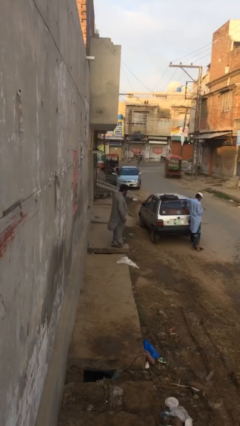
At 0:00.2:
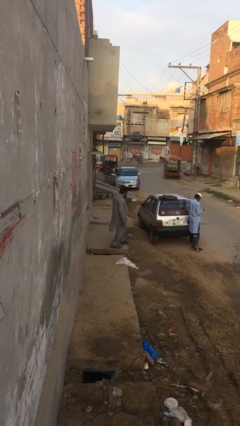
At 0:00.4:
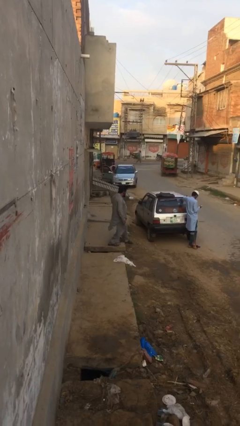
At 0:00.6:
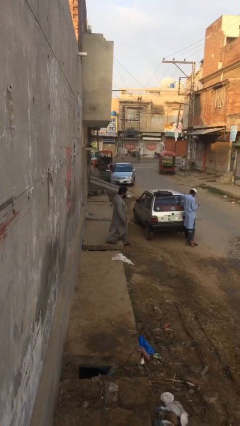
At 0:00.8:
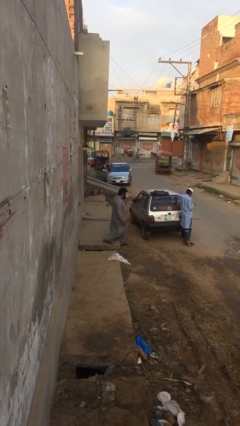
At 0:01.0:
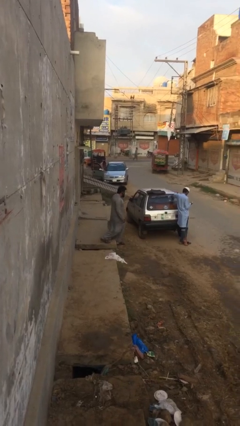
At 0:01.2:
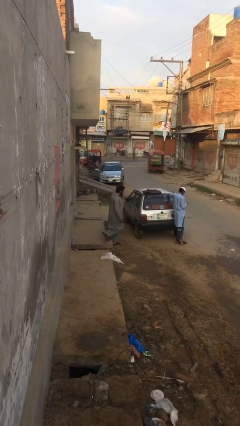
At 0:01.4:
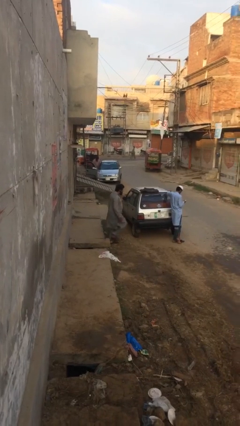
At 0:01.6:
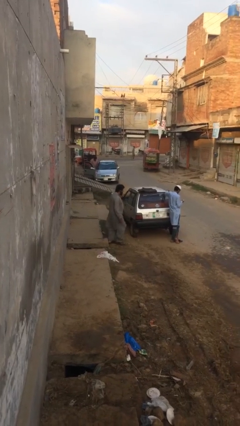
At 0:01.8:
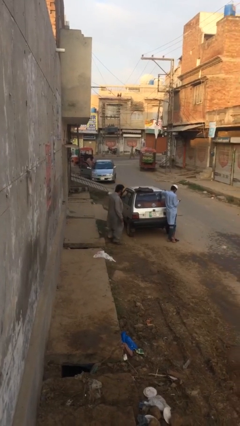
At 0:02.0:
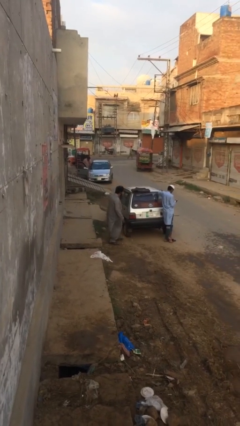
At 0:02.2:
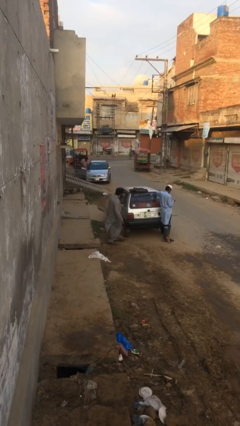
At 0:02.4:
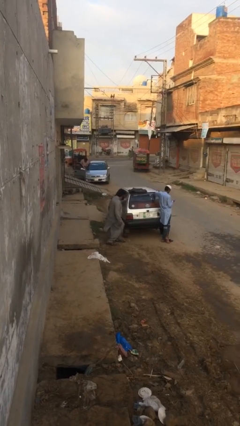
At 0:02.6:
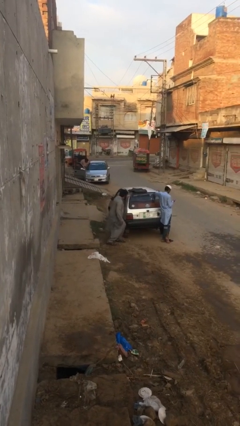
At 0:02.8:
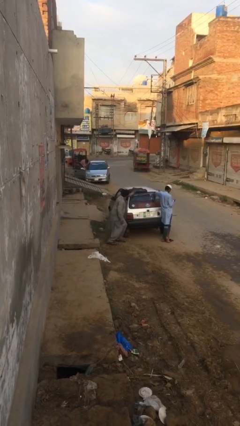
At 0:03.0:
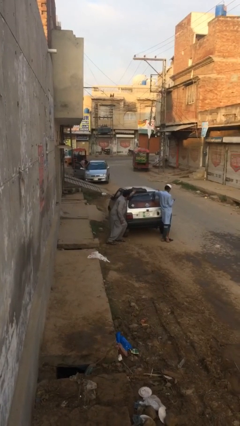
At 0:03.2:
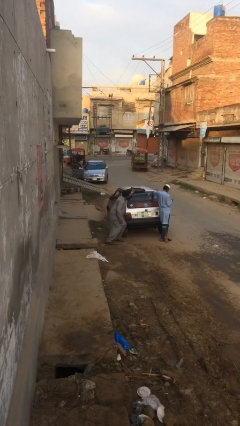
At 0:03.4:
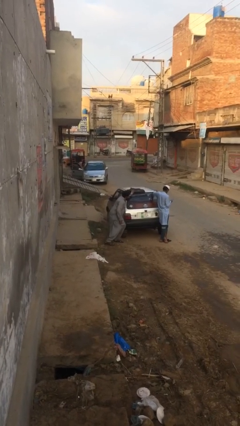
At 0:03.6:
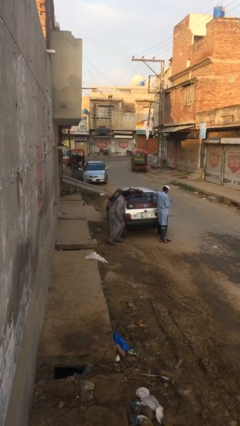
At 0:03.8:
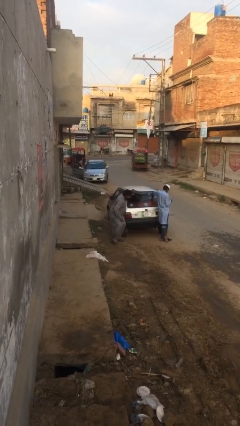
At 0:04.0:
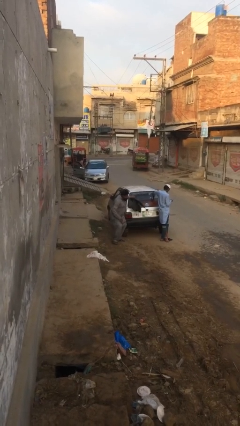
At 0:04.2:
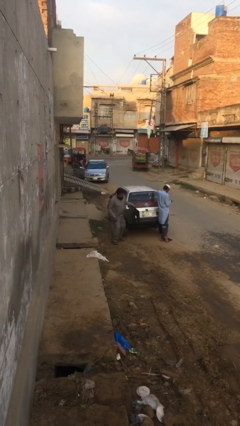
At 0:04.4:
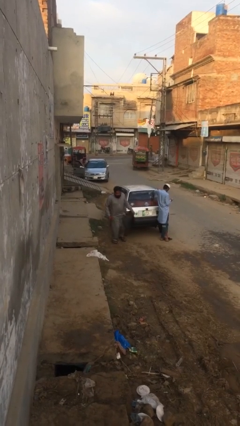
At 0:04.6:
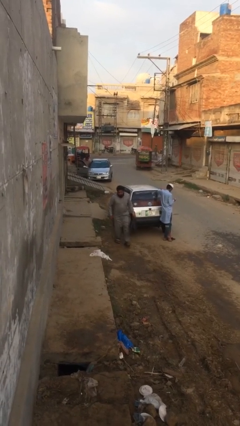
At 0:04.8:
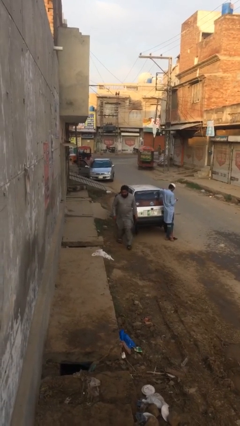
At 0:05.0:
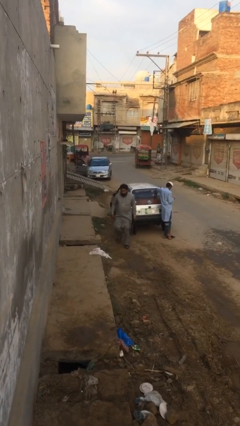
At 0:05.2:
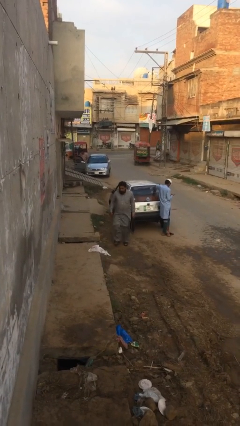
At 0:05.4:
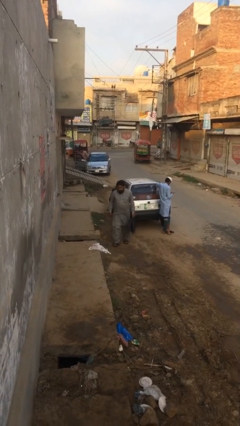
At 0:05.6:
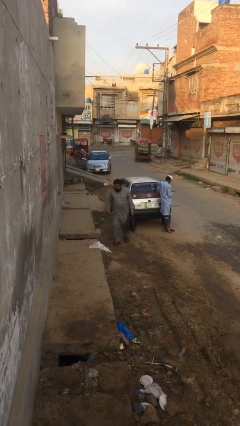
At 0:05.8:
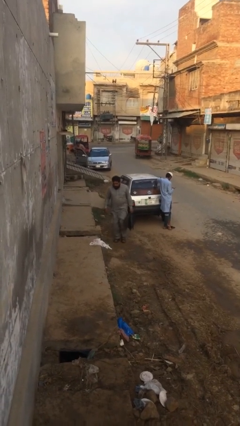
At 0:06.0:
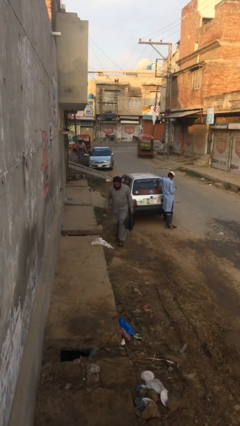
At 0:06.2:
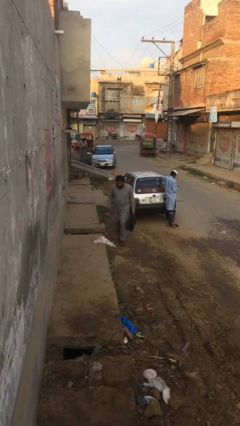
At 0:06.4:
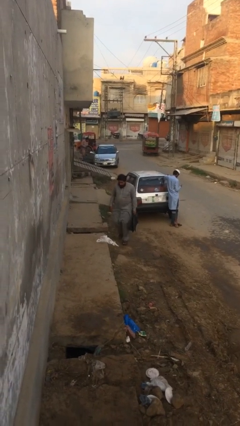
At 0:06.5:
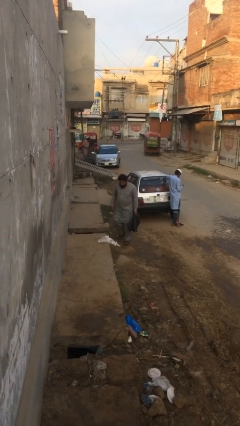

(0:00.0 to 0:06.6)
person steals object from person

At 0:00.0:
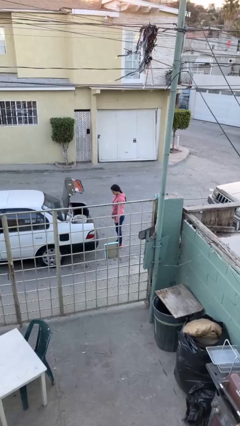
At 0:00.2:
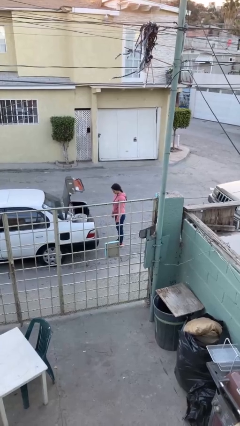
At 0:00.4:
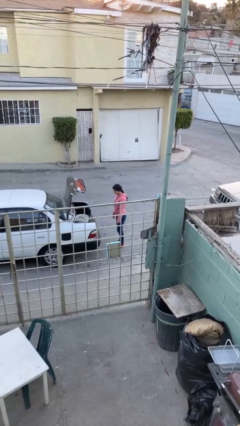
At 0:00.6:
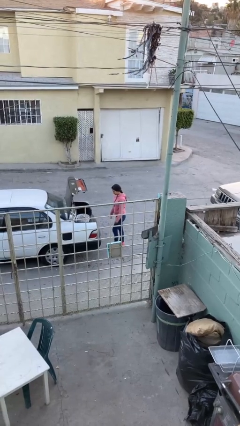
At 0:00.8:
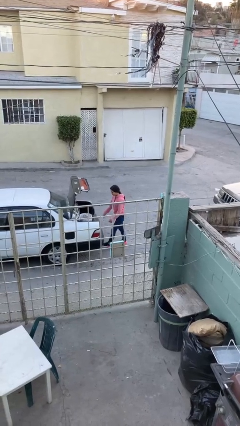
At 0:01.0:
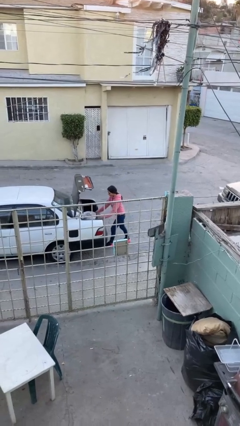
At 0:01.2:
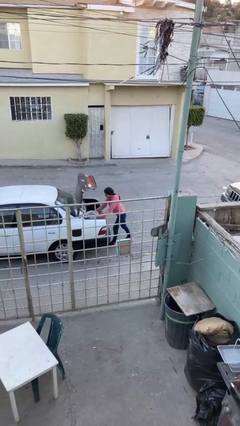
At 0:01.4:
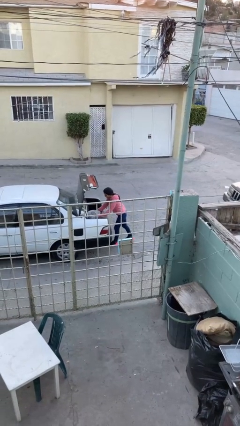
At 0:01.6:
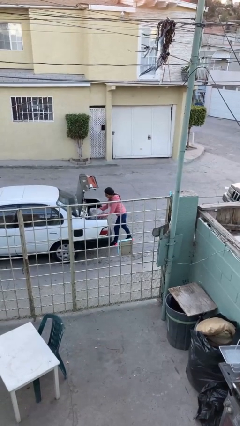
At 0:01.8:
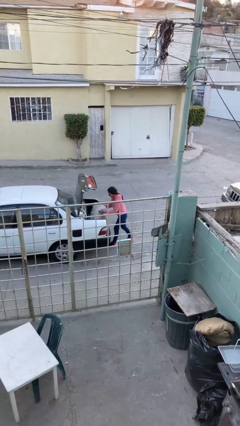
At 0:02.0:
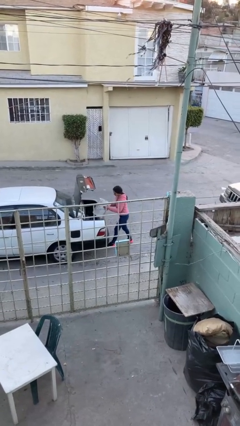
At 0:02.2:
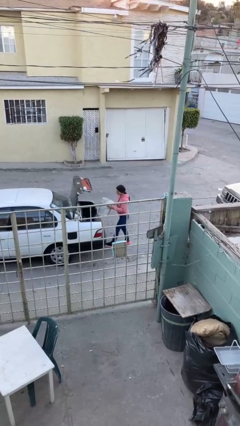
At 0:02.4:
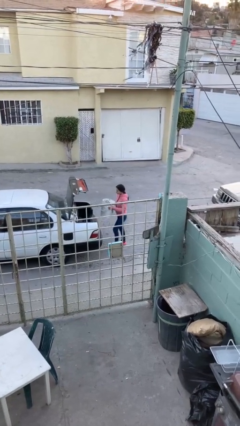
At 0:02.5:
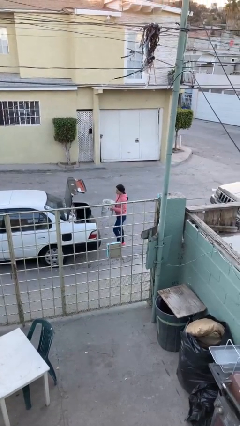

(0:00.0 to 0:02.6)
person unloads car

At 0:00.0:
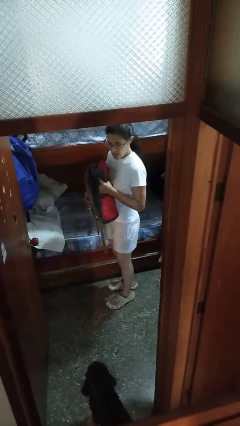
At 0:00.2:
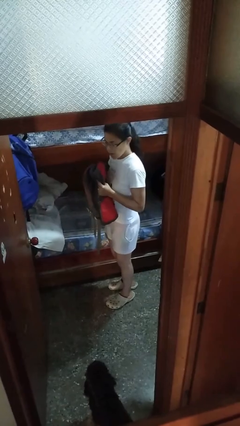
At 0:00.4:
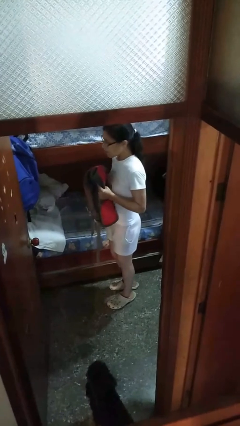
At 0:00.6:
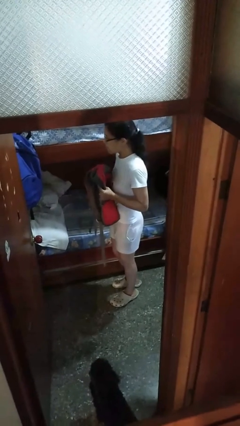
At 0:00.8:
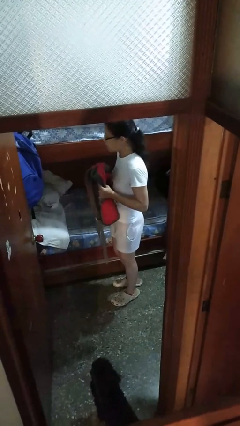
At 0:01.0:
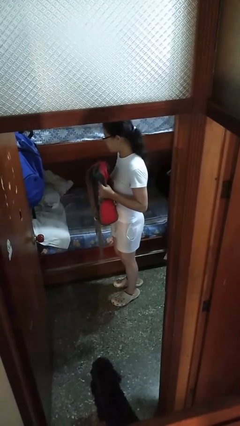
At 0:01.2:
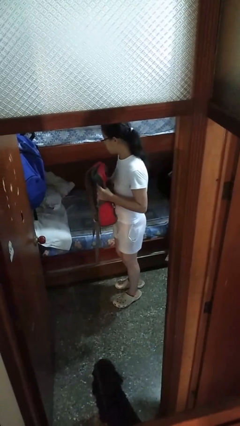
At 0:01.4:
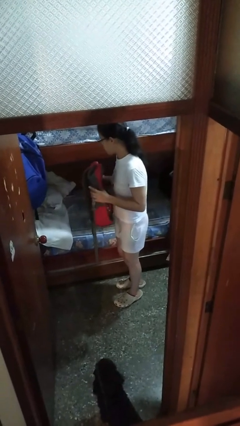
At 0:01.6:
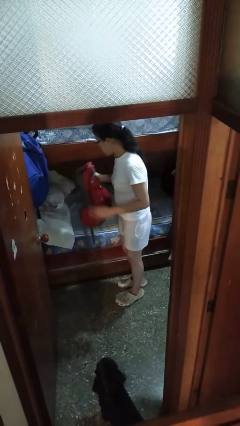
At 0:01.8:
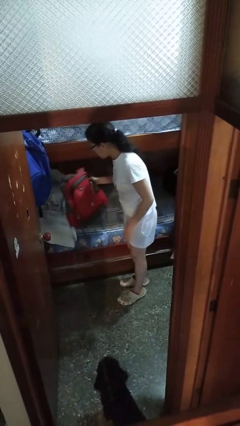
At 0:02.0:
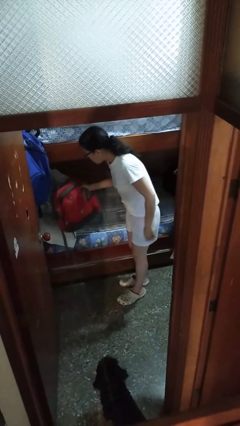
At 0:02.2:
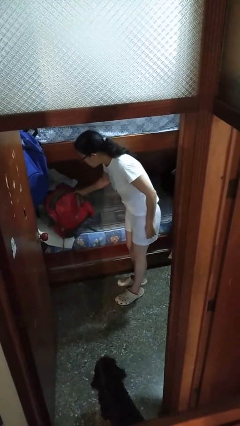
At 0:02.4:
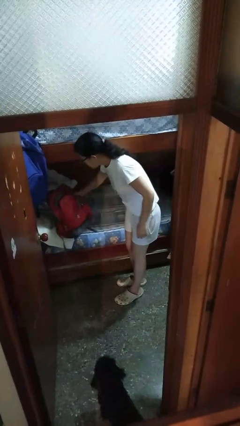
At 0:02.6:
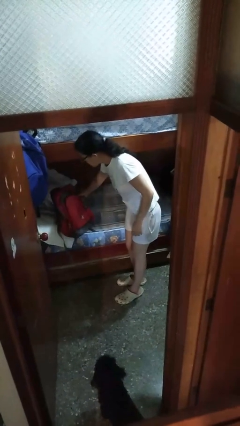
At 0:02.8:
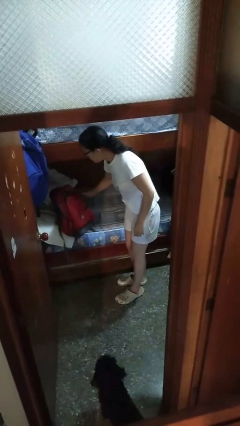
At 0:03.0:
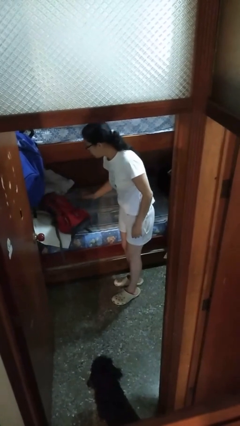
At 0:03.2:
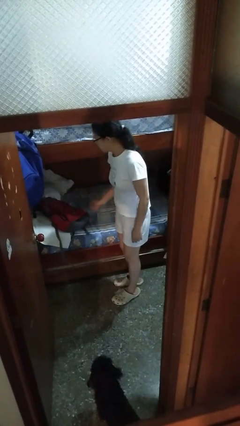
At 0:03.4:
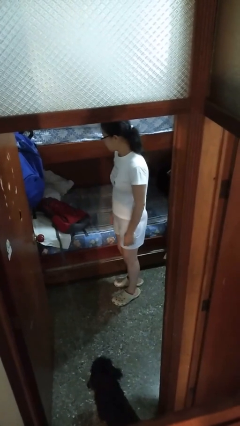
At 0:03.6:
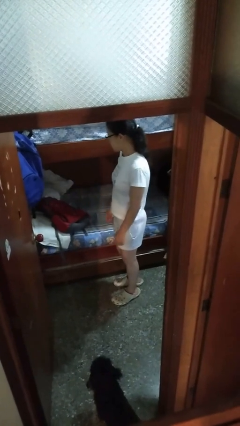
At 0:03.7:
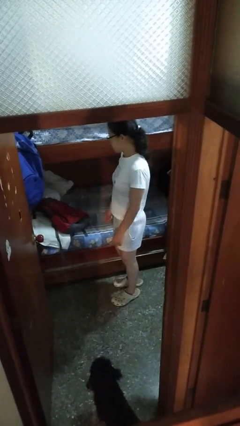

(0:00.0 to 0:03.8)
person puts down object on bed

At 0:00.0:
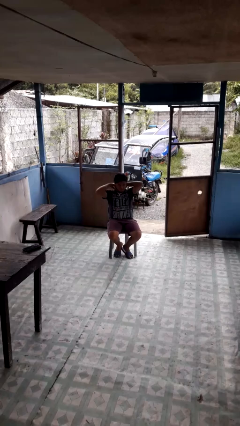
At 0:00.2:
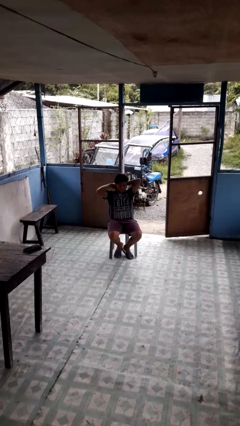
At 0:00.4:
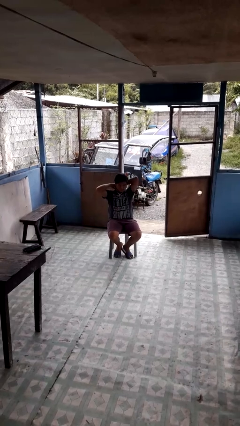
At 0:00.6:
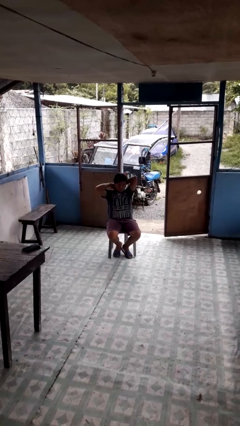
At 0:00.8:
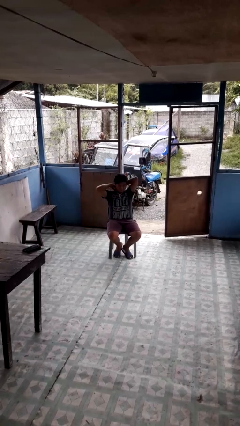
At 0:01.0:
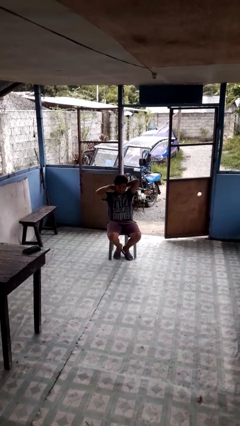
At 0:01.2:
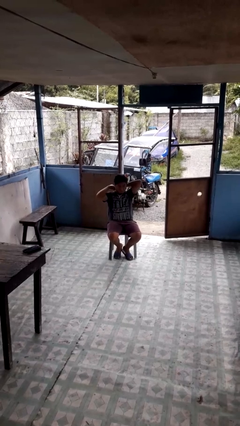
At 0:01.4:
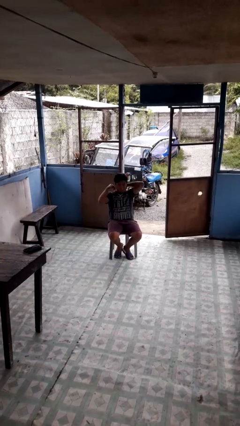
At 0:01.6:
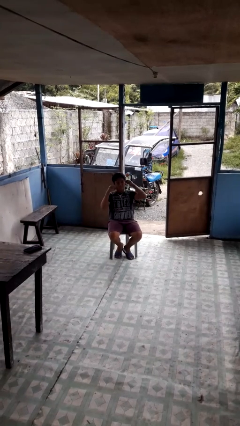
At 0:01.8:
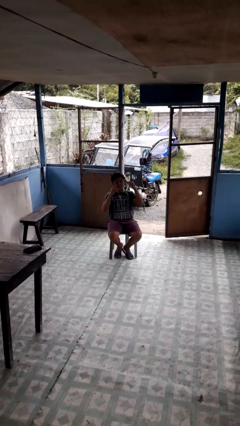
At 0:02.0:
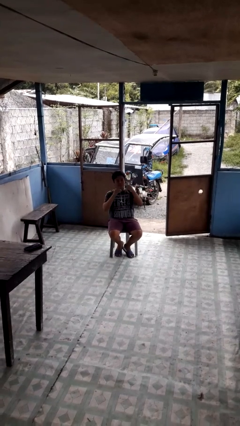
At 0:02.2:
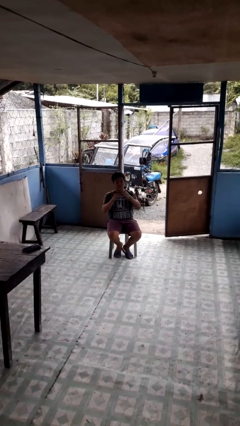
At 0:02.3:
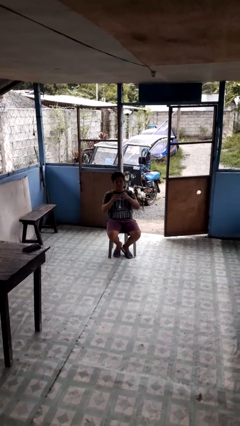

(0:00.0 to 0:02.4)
person takes off necklace

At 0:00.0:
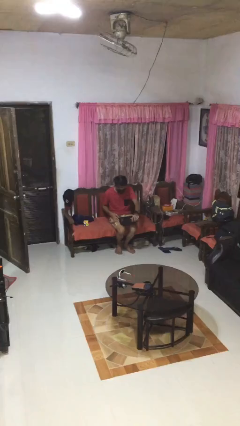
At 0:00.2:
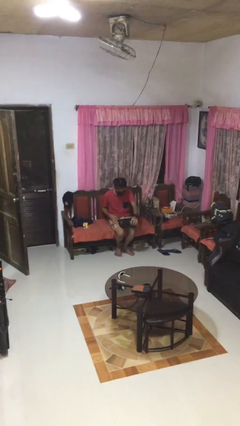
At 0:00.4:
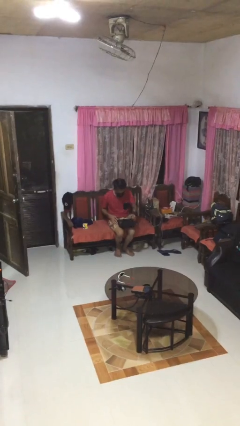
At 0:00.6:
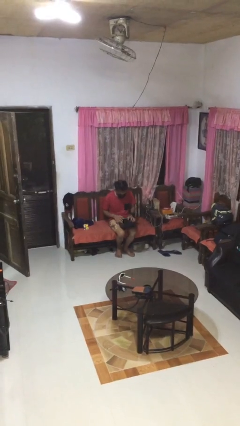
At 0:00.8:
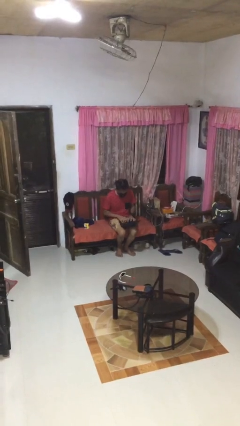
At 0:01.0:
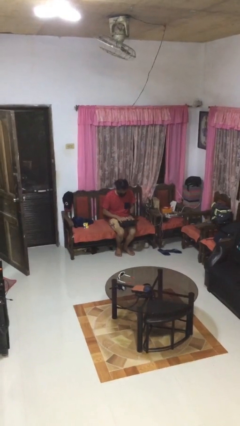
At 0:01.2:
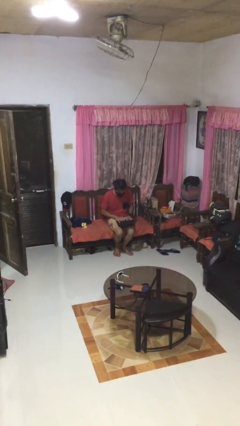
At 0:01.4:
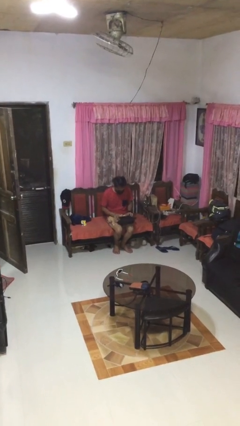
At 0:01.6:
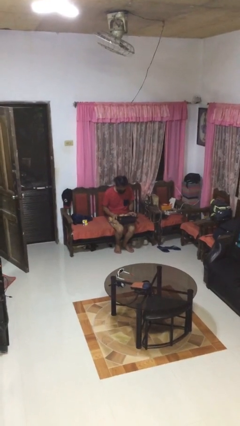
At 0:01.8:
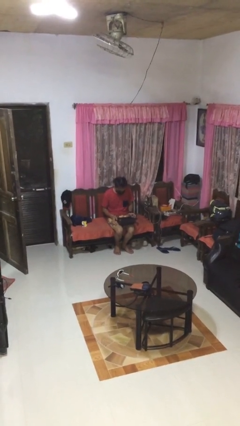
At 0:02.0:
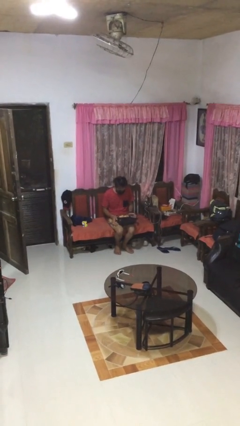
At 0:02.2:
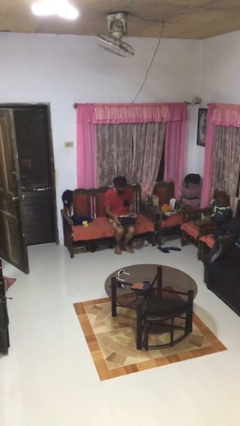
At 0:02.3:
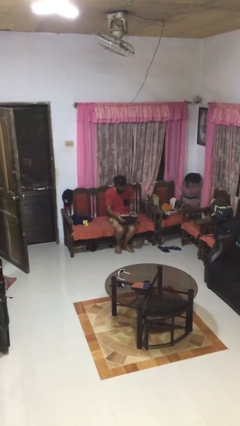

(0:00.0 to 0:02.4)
person opens laptop
